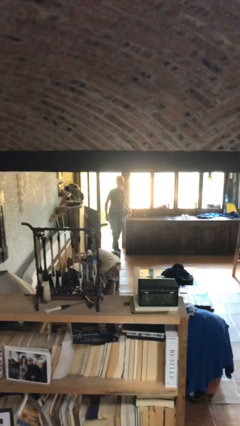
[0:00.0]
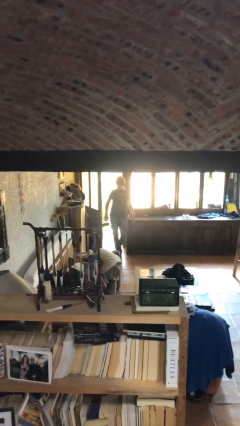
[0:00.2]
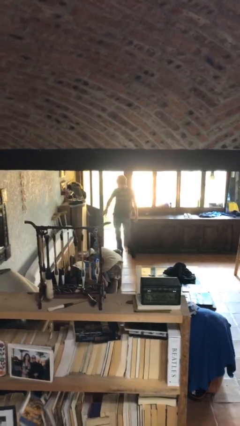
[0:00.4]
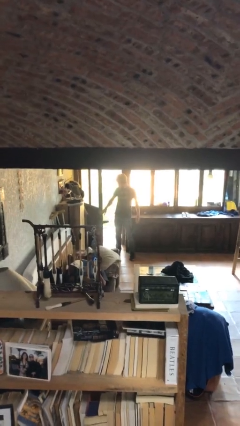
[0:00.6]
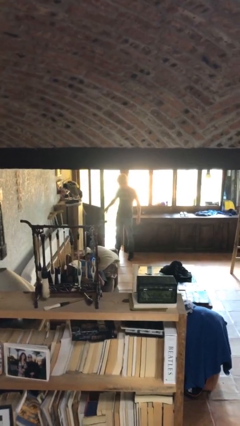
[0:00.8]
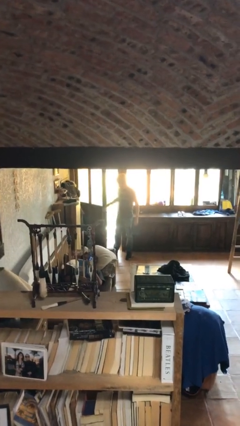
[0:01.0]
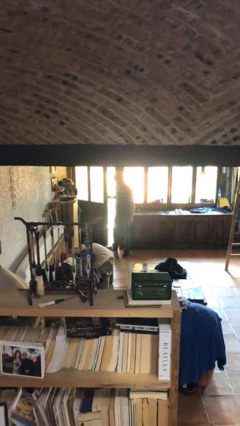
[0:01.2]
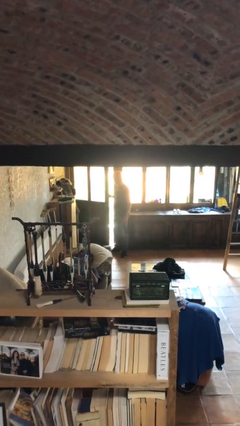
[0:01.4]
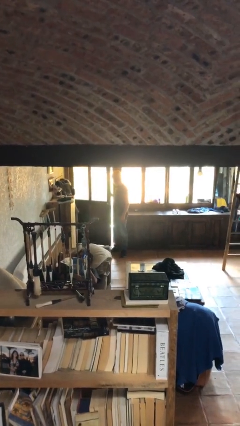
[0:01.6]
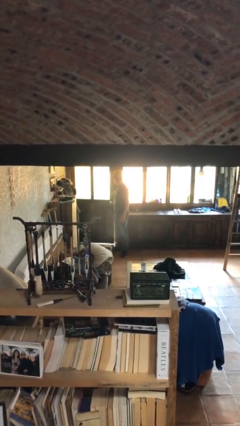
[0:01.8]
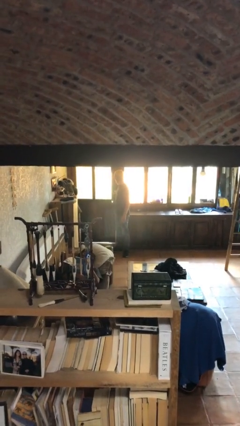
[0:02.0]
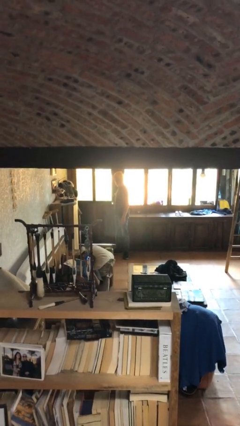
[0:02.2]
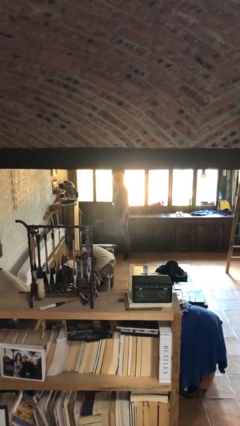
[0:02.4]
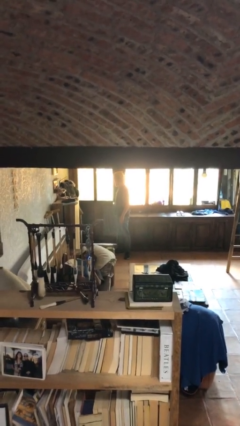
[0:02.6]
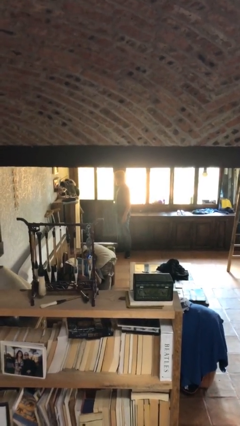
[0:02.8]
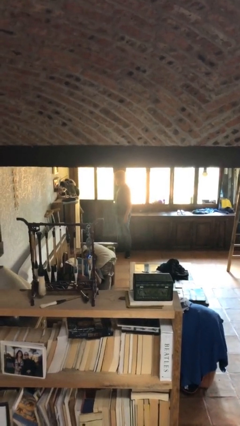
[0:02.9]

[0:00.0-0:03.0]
person closes facility door

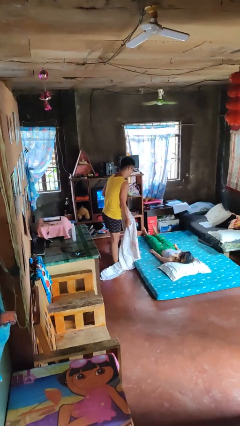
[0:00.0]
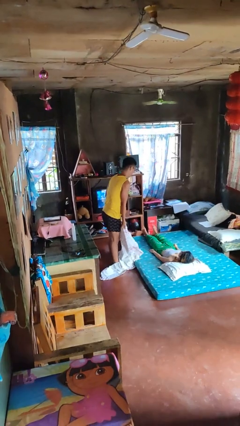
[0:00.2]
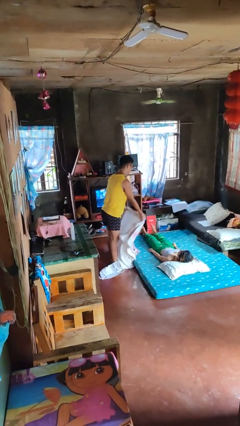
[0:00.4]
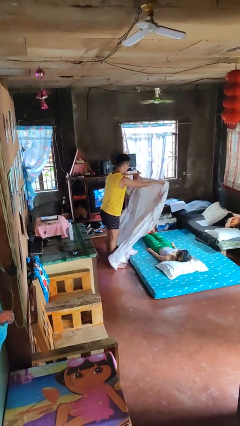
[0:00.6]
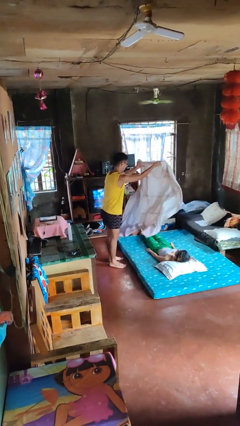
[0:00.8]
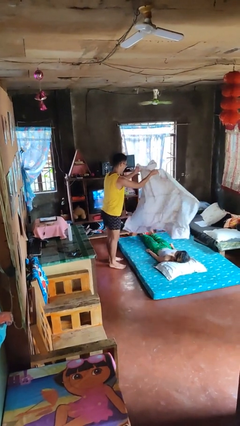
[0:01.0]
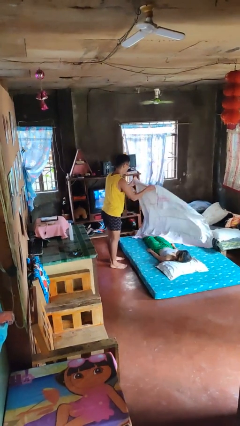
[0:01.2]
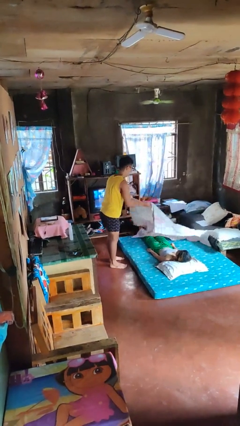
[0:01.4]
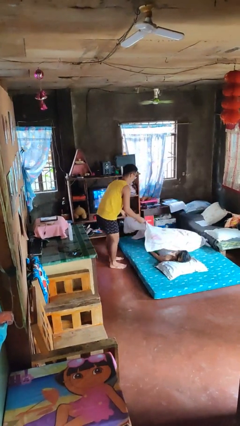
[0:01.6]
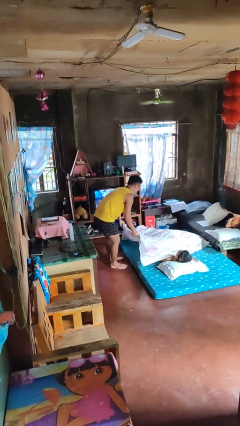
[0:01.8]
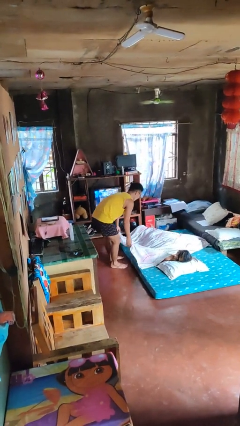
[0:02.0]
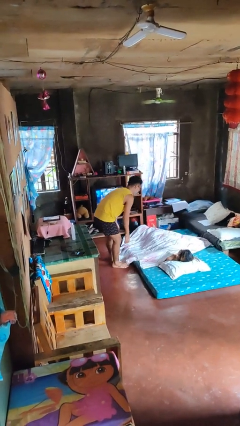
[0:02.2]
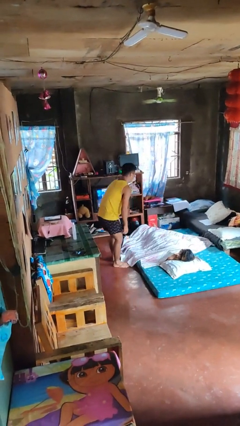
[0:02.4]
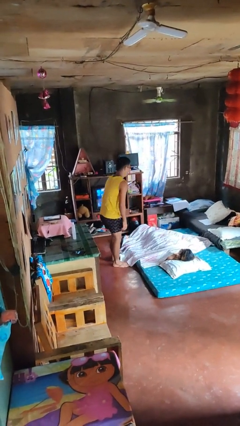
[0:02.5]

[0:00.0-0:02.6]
person covers friend with blanket

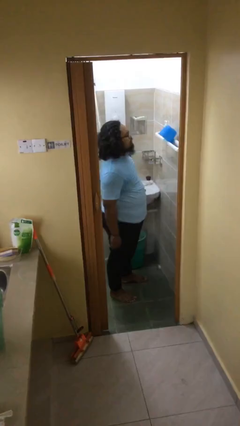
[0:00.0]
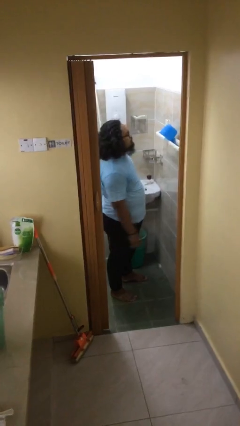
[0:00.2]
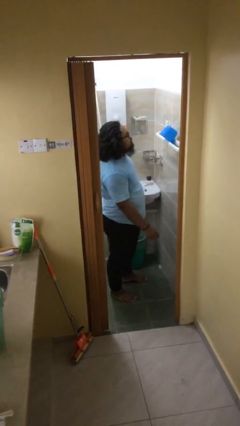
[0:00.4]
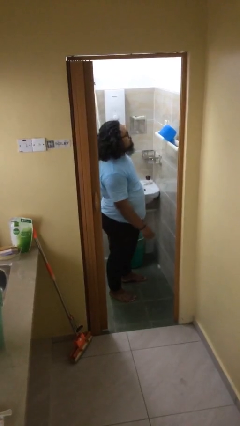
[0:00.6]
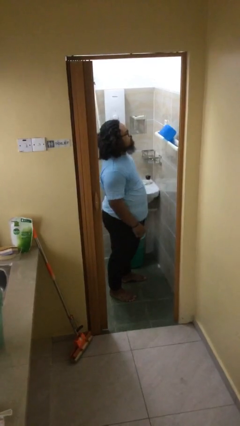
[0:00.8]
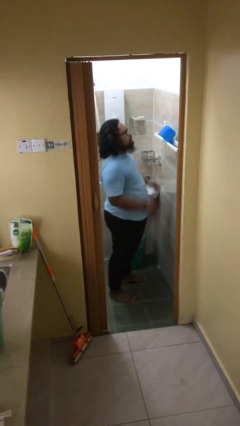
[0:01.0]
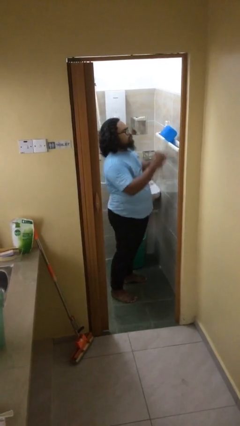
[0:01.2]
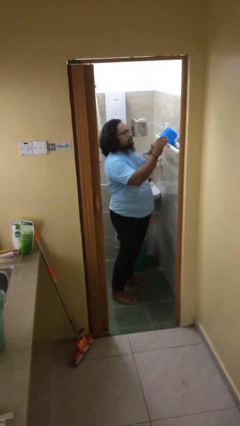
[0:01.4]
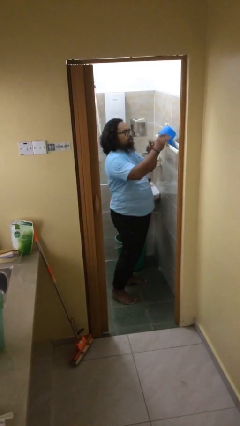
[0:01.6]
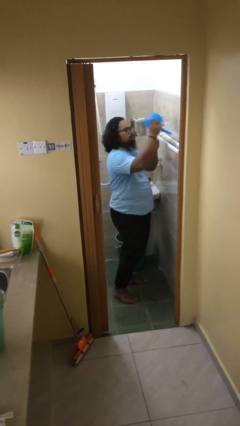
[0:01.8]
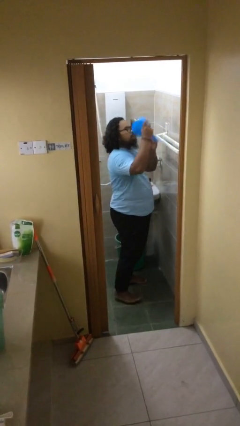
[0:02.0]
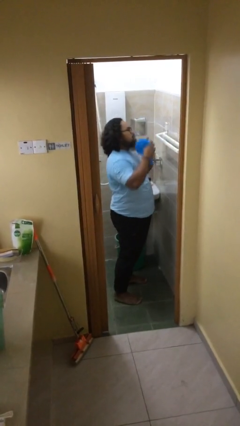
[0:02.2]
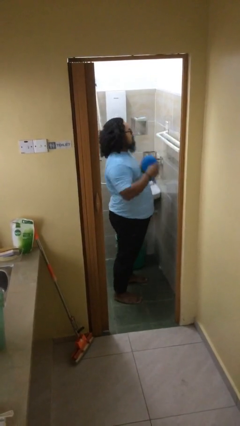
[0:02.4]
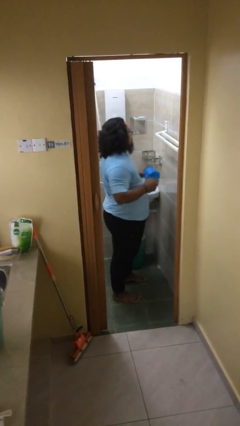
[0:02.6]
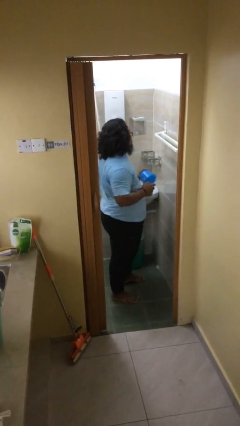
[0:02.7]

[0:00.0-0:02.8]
person picks up object from countertop

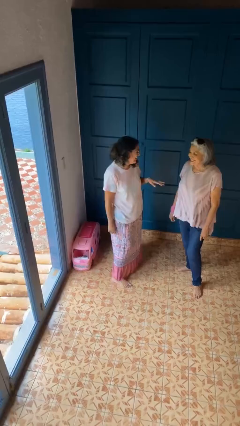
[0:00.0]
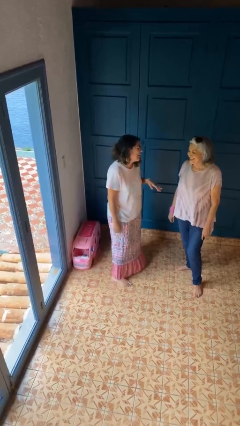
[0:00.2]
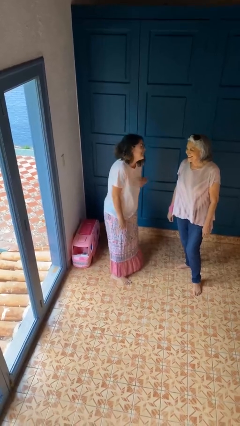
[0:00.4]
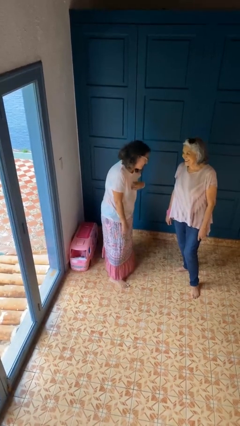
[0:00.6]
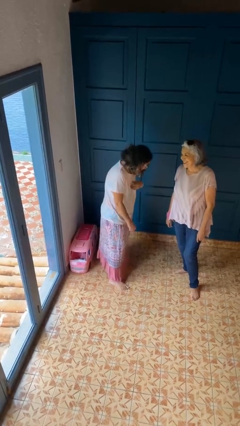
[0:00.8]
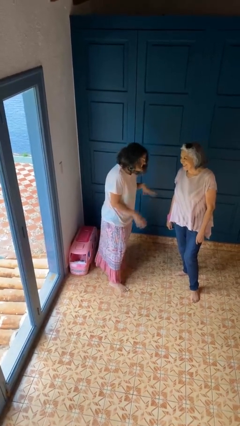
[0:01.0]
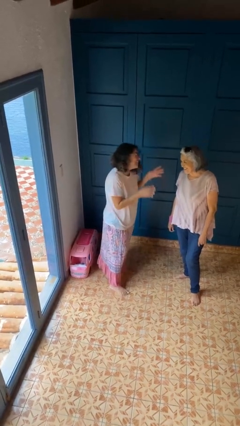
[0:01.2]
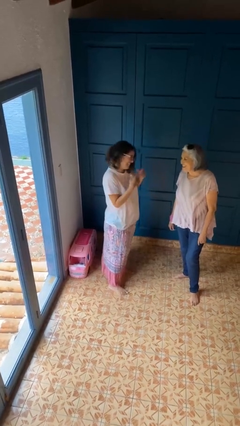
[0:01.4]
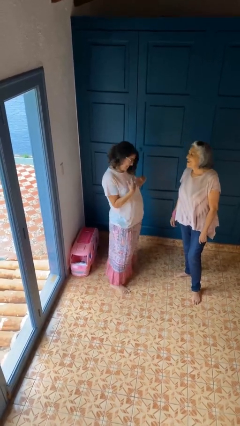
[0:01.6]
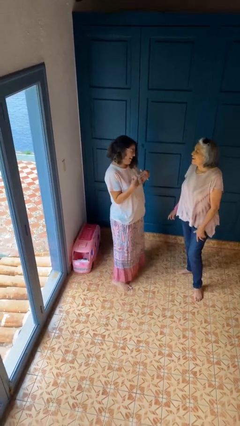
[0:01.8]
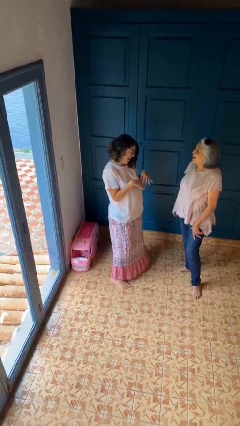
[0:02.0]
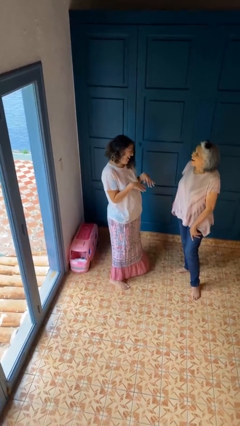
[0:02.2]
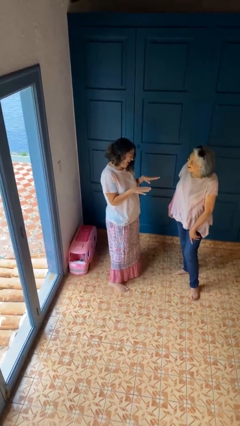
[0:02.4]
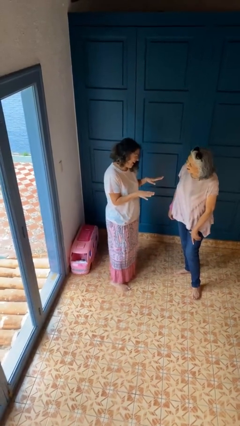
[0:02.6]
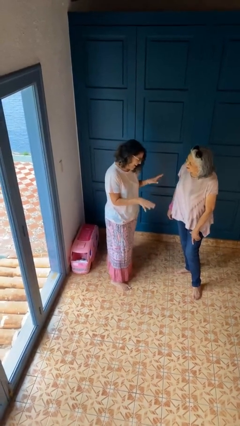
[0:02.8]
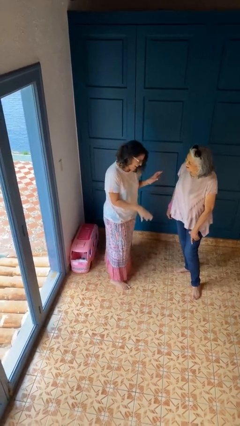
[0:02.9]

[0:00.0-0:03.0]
person laughs with person

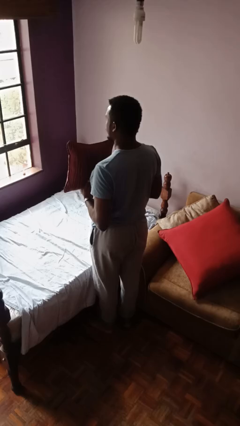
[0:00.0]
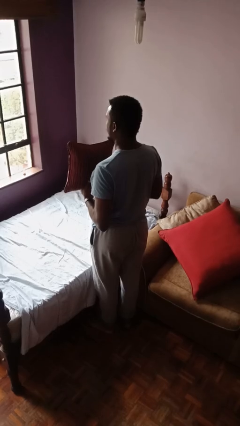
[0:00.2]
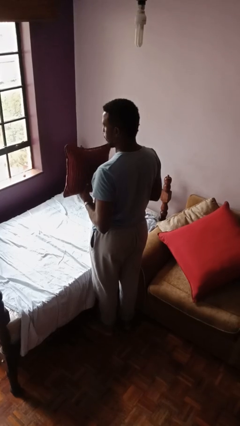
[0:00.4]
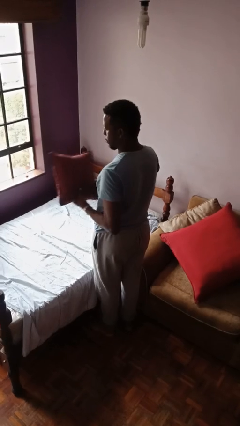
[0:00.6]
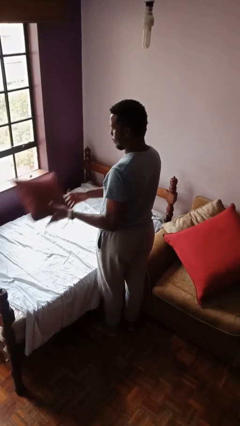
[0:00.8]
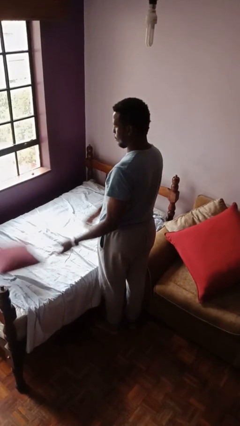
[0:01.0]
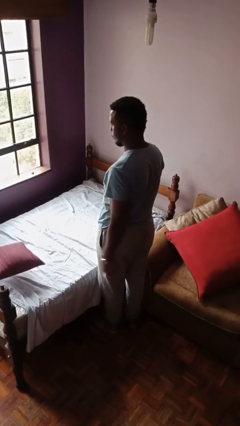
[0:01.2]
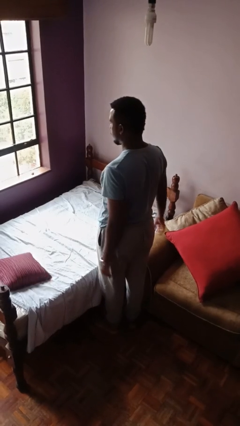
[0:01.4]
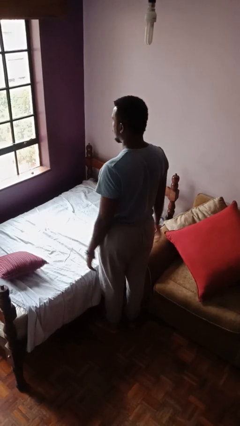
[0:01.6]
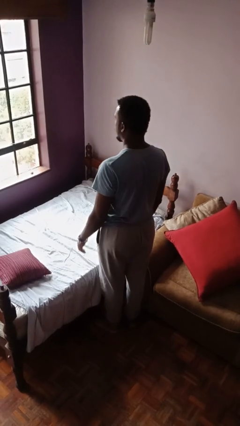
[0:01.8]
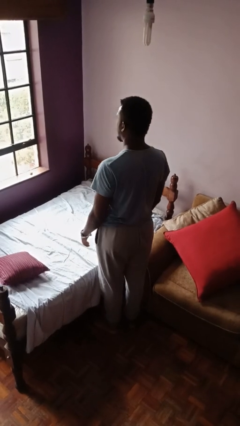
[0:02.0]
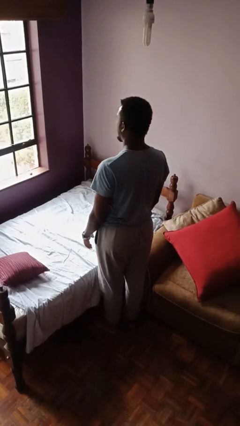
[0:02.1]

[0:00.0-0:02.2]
person throws object on bed

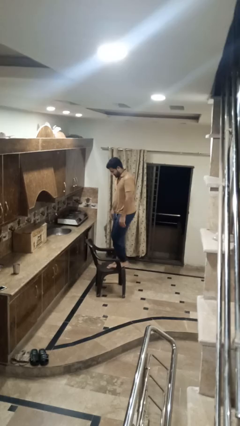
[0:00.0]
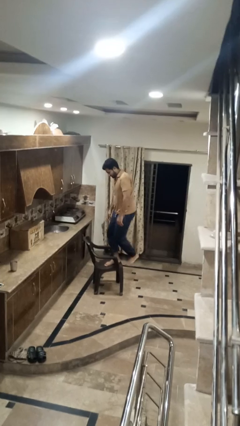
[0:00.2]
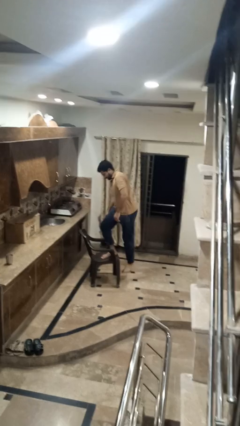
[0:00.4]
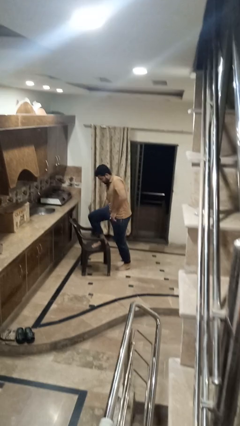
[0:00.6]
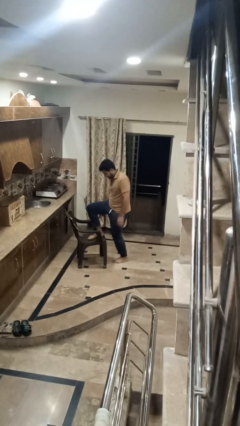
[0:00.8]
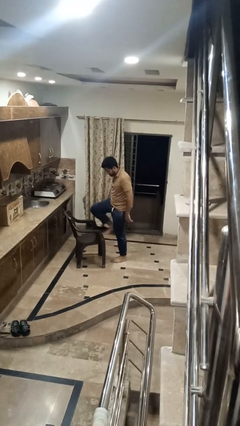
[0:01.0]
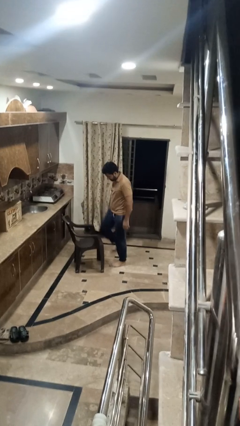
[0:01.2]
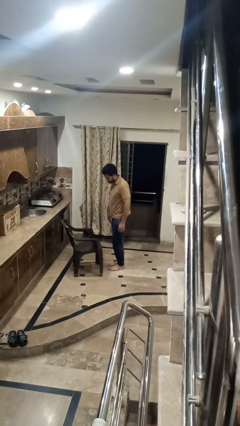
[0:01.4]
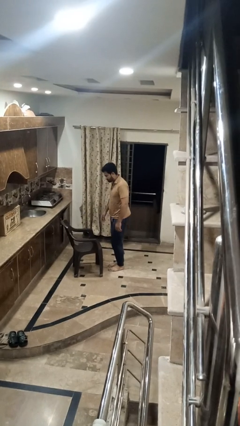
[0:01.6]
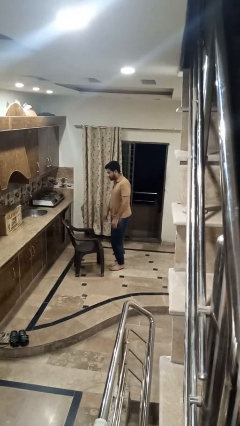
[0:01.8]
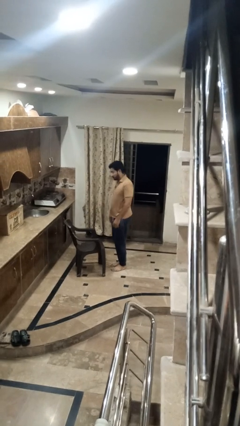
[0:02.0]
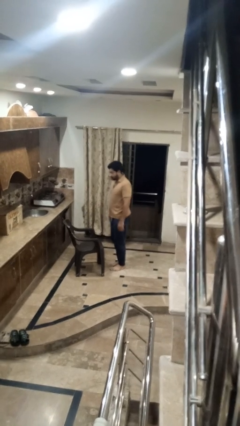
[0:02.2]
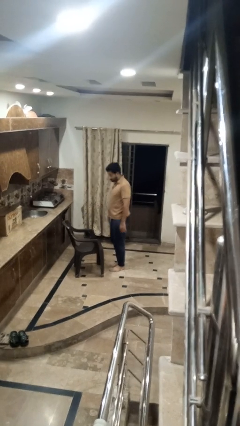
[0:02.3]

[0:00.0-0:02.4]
person climbs off chair

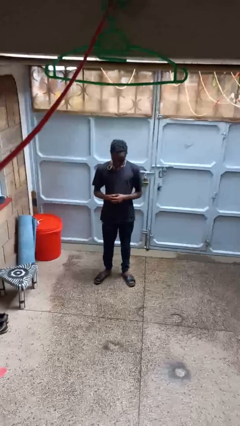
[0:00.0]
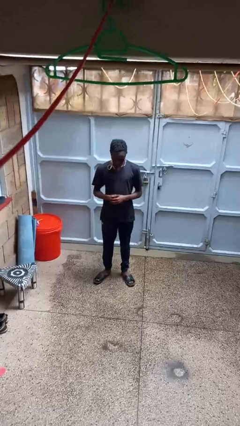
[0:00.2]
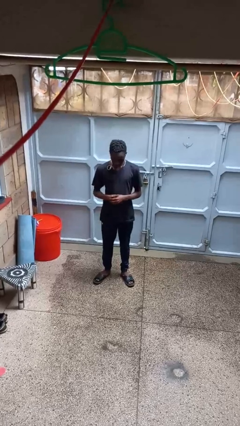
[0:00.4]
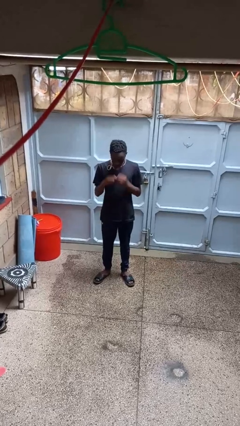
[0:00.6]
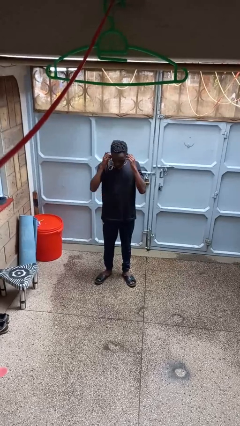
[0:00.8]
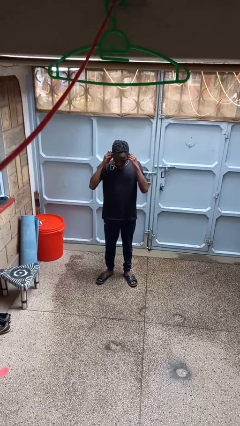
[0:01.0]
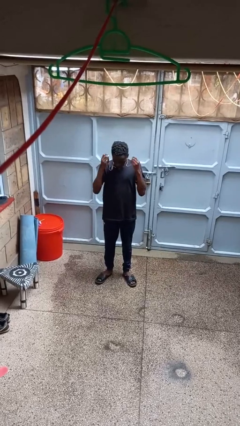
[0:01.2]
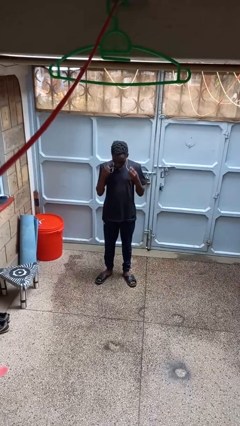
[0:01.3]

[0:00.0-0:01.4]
person takes off headphones
